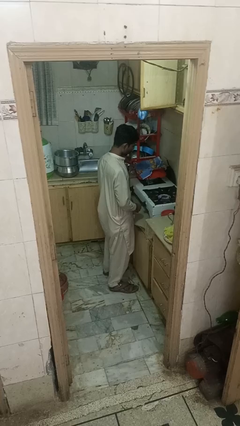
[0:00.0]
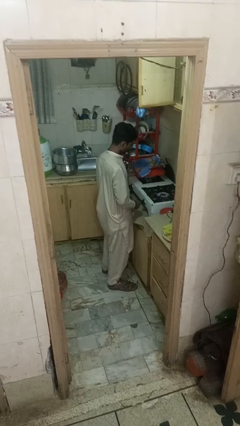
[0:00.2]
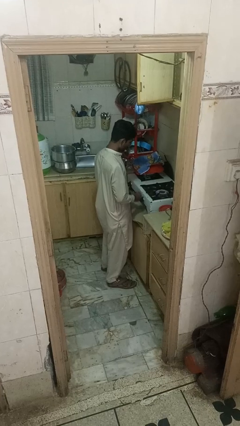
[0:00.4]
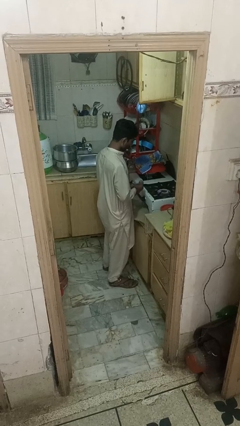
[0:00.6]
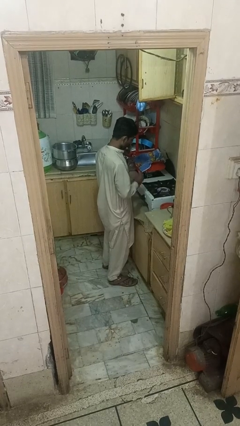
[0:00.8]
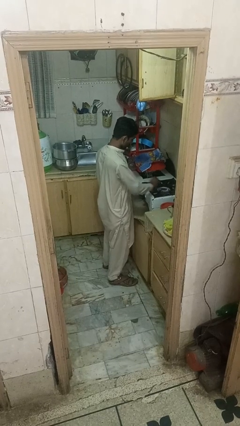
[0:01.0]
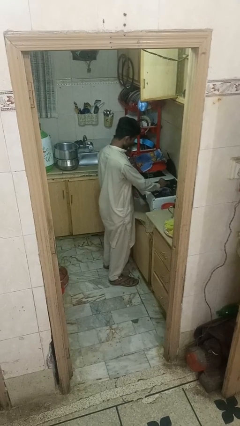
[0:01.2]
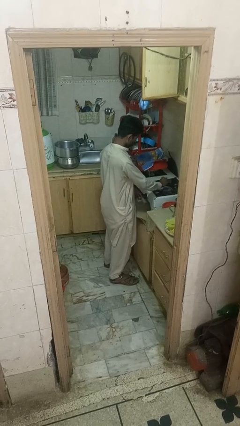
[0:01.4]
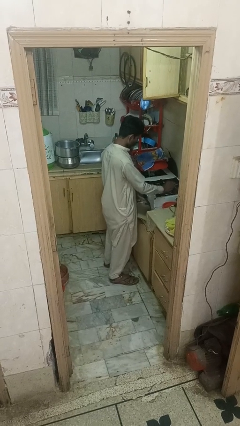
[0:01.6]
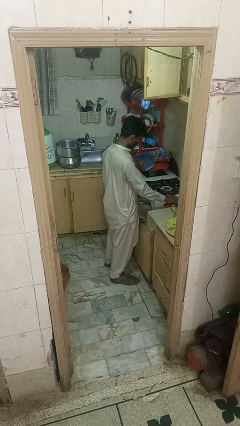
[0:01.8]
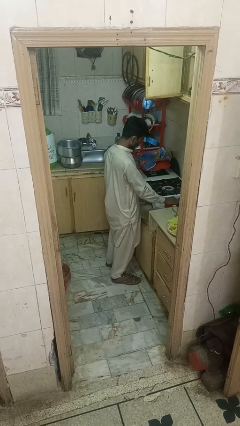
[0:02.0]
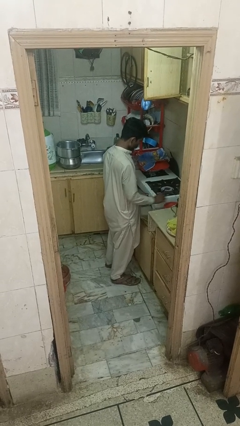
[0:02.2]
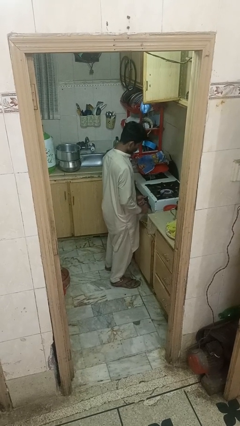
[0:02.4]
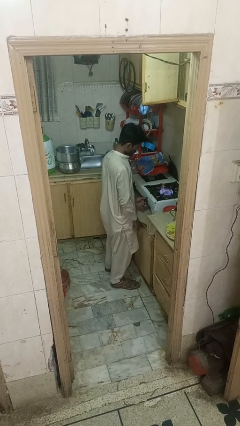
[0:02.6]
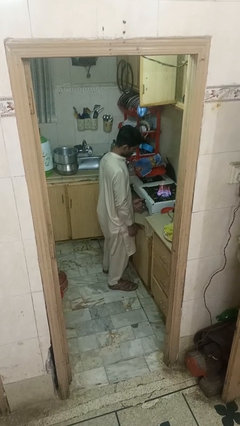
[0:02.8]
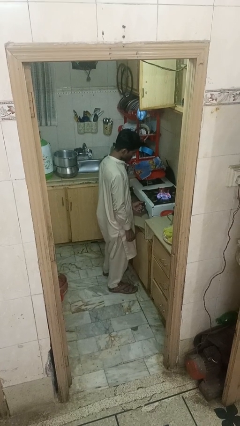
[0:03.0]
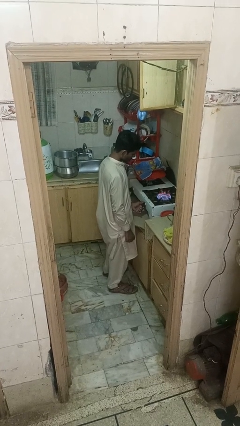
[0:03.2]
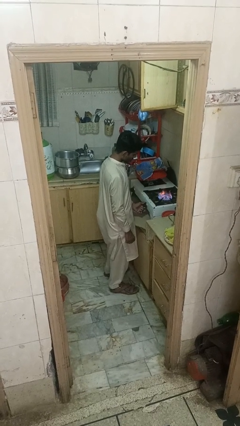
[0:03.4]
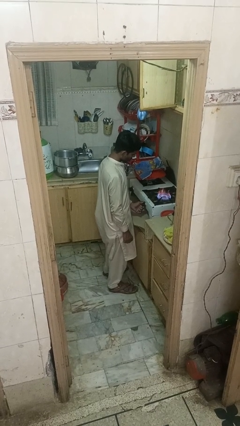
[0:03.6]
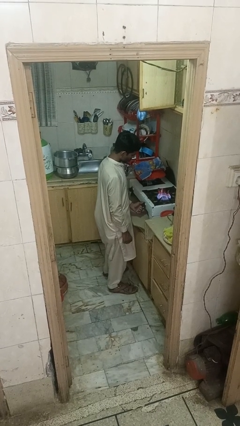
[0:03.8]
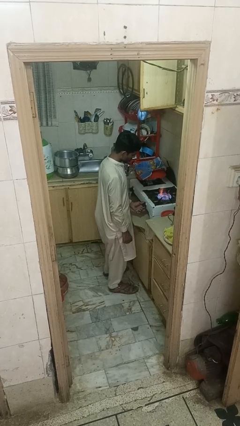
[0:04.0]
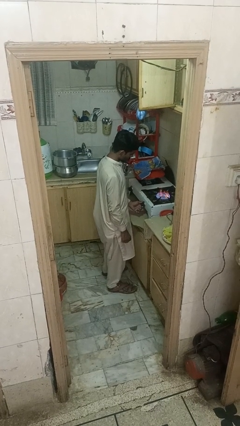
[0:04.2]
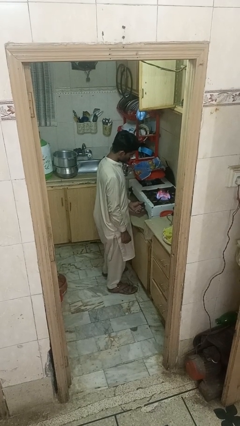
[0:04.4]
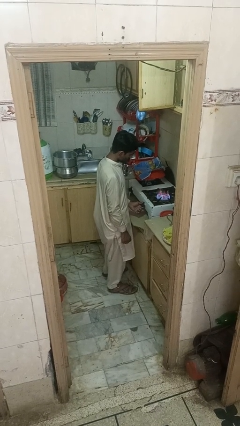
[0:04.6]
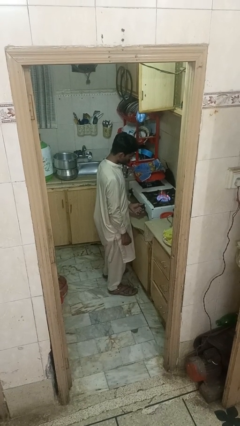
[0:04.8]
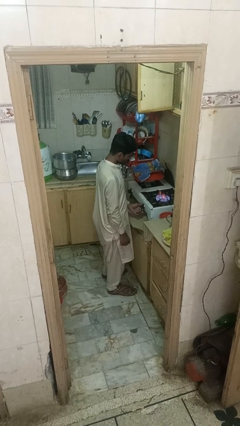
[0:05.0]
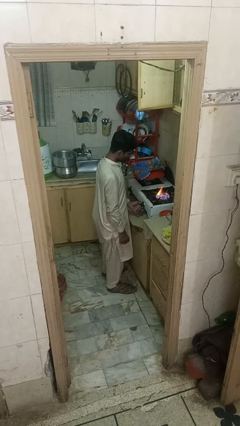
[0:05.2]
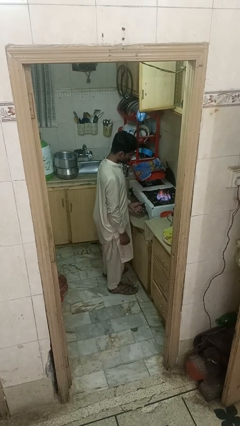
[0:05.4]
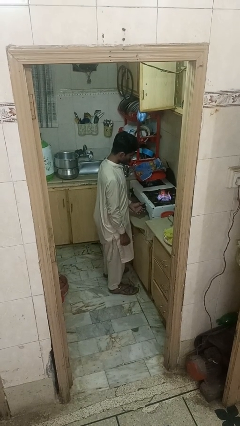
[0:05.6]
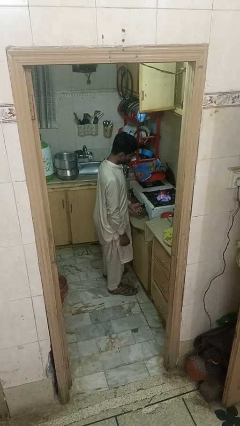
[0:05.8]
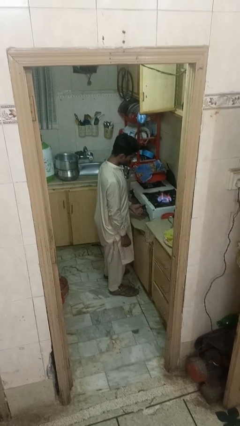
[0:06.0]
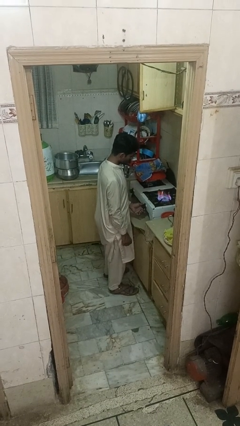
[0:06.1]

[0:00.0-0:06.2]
person turns on stovetop

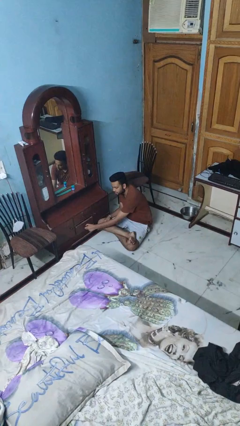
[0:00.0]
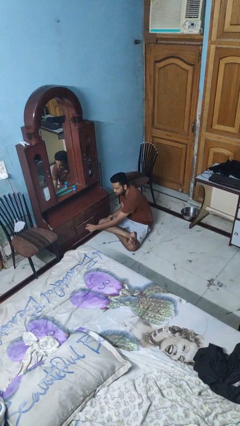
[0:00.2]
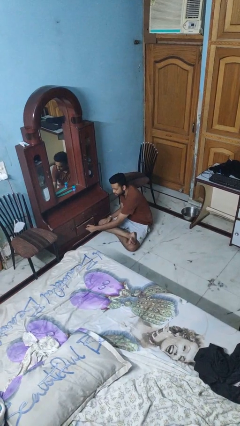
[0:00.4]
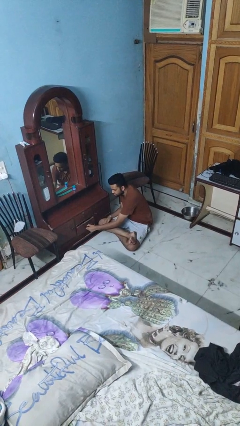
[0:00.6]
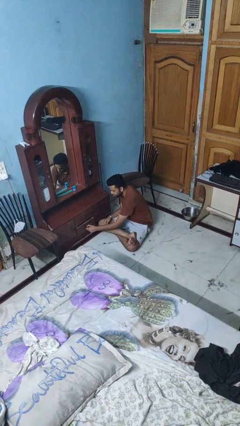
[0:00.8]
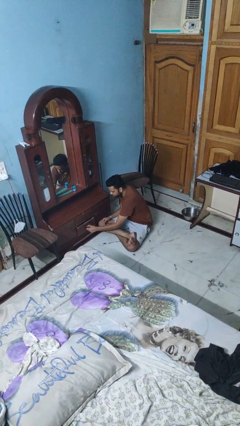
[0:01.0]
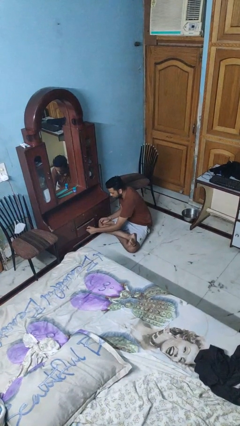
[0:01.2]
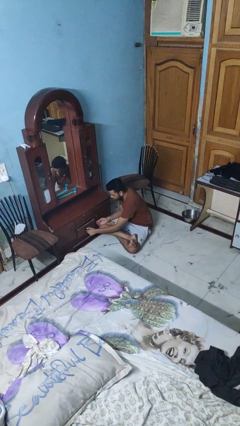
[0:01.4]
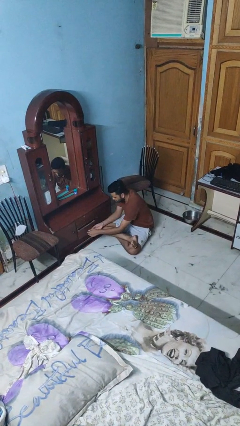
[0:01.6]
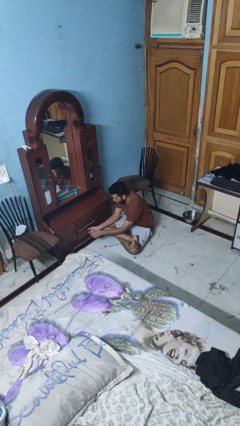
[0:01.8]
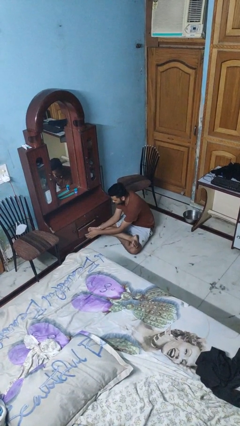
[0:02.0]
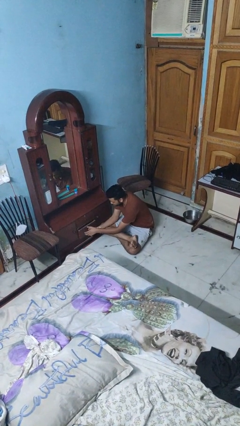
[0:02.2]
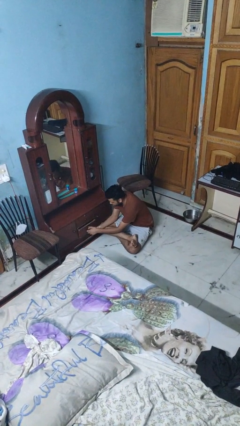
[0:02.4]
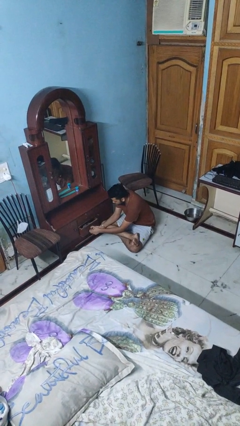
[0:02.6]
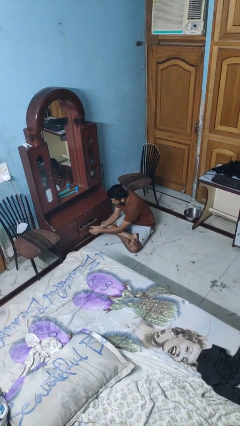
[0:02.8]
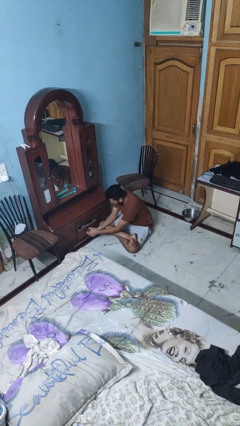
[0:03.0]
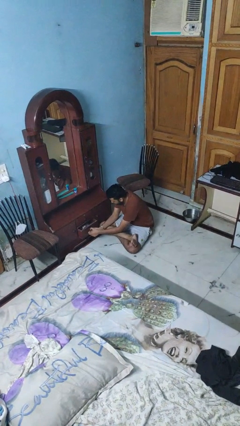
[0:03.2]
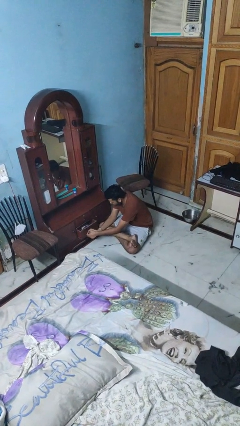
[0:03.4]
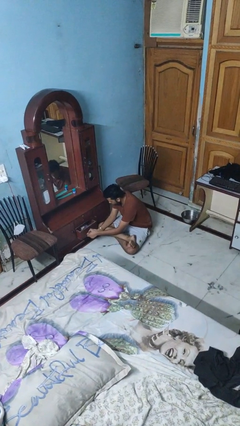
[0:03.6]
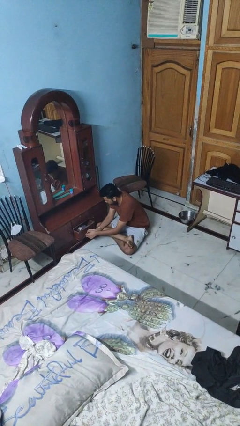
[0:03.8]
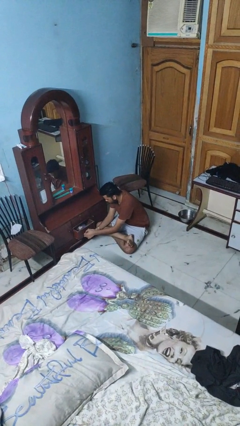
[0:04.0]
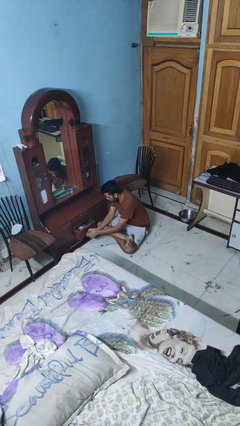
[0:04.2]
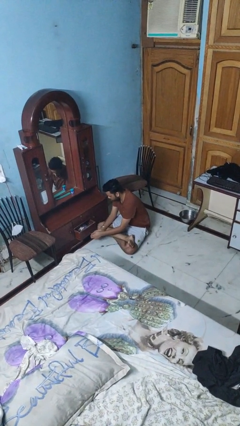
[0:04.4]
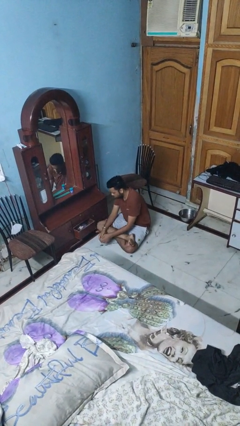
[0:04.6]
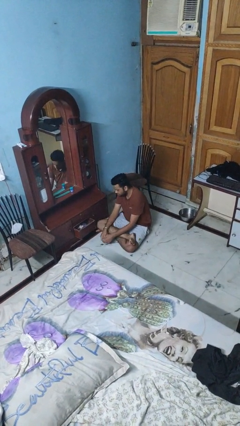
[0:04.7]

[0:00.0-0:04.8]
person opens dresser drawer

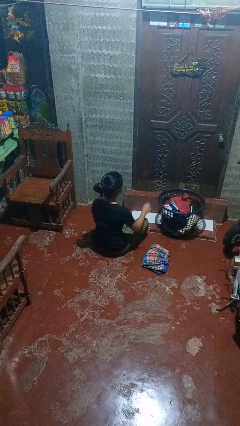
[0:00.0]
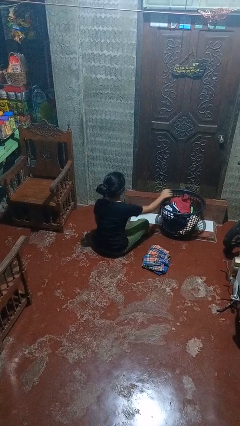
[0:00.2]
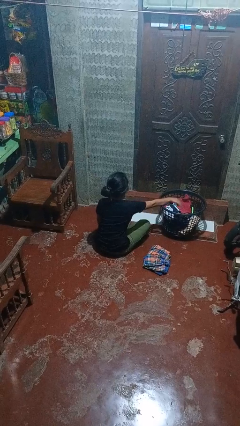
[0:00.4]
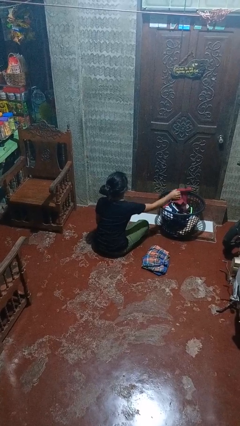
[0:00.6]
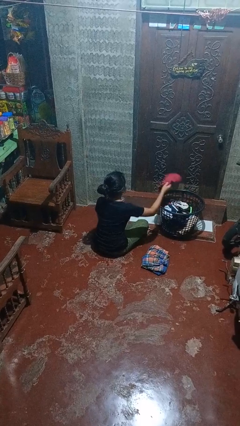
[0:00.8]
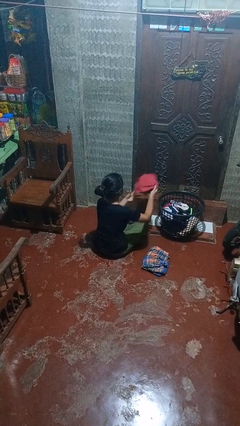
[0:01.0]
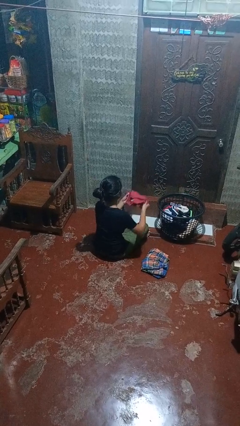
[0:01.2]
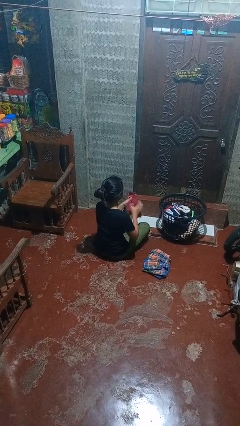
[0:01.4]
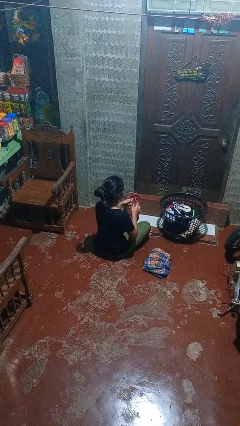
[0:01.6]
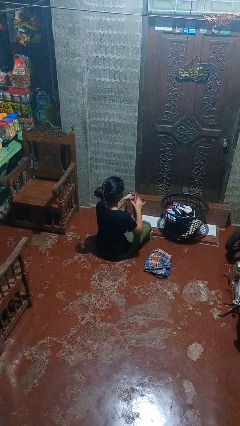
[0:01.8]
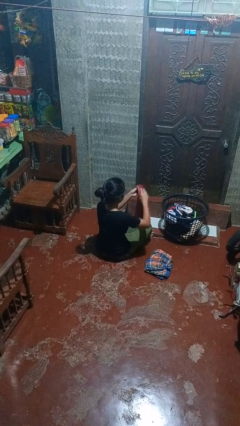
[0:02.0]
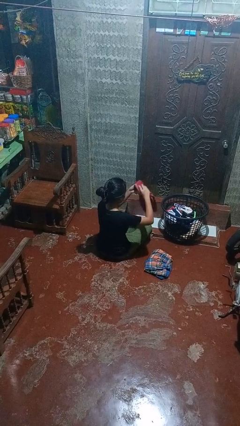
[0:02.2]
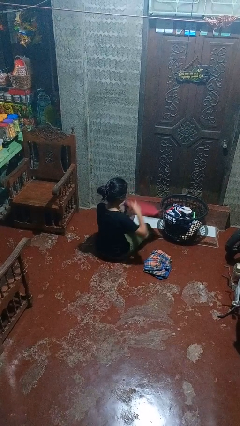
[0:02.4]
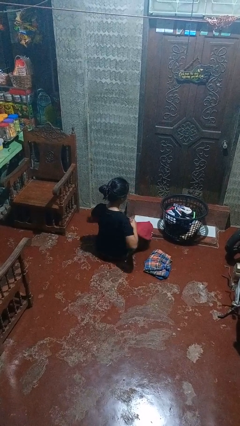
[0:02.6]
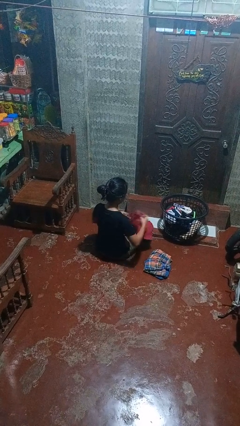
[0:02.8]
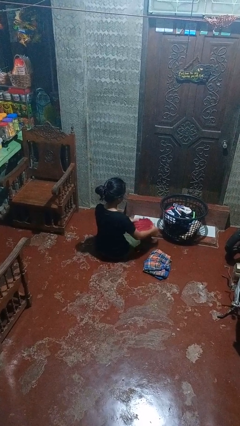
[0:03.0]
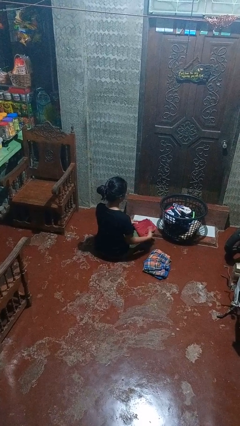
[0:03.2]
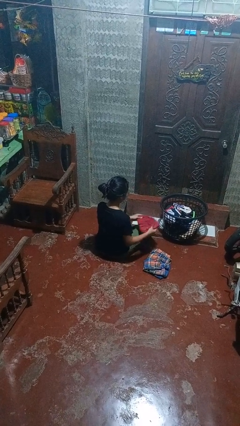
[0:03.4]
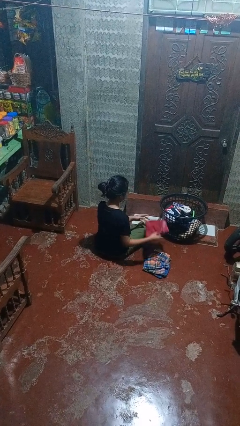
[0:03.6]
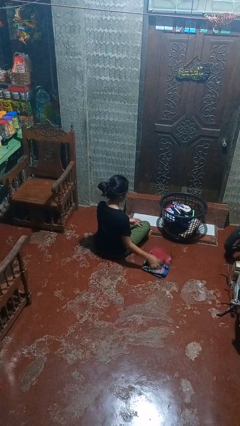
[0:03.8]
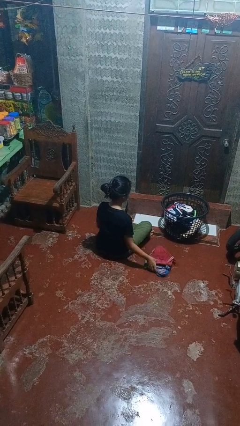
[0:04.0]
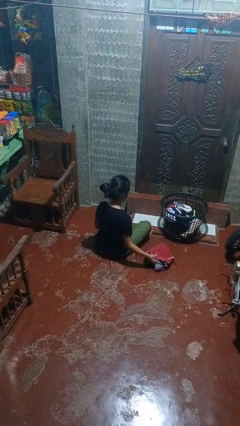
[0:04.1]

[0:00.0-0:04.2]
person folds pants

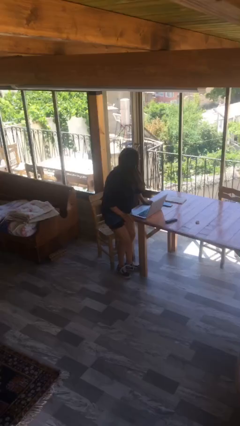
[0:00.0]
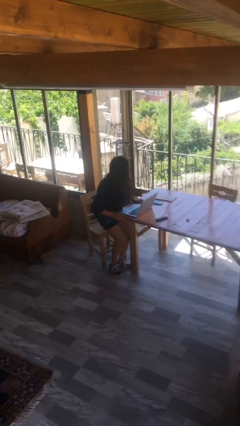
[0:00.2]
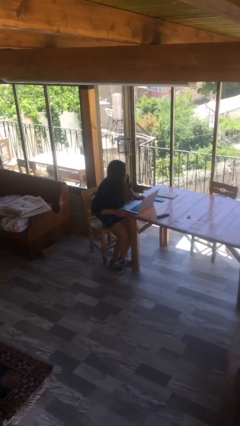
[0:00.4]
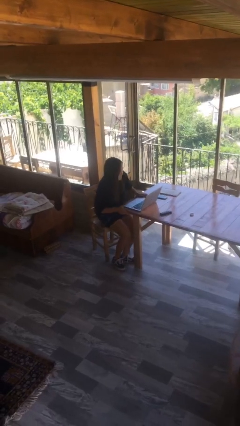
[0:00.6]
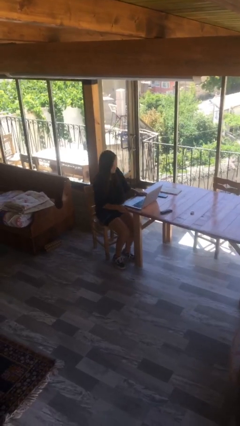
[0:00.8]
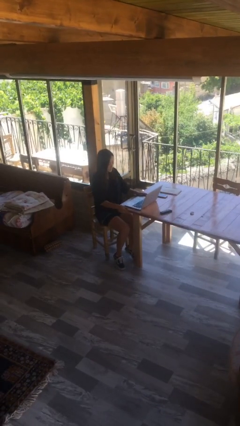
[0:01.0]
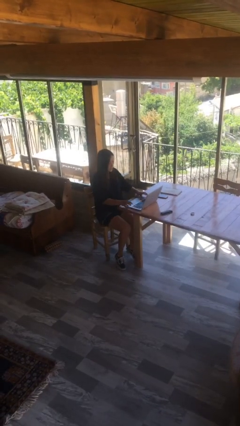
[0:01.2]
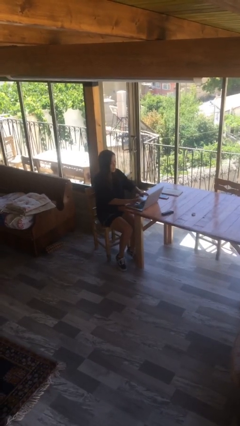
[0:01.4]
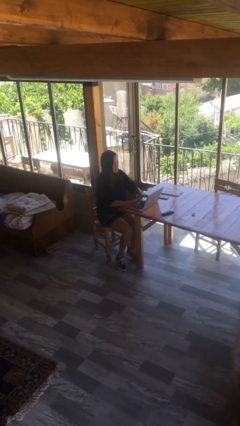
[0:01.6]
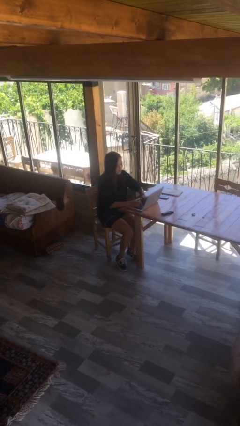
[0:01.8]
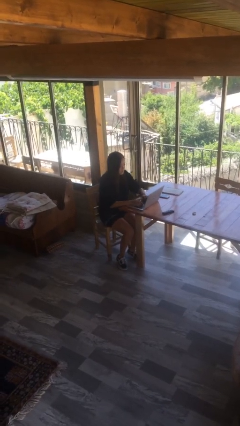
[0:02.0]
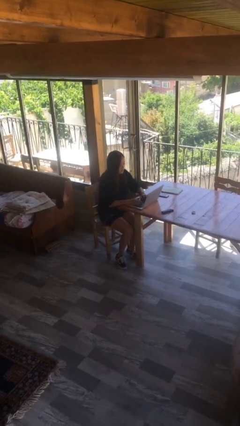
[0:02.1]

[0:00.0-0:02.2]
person sits down

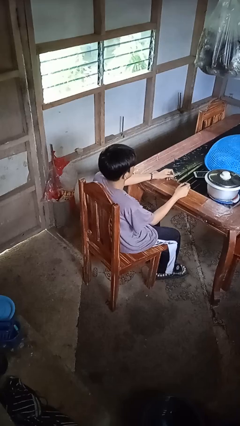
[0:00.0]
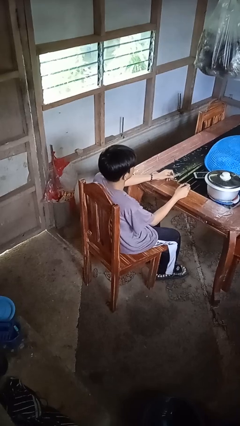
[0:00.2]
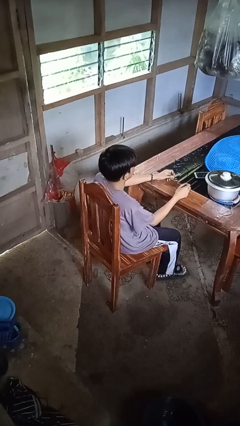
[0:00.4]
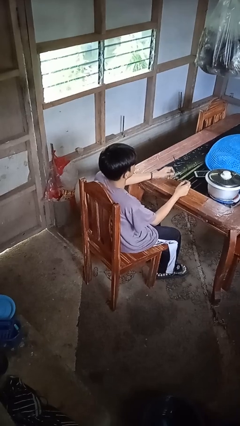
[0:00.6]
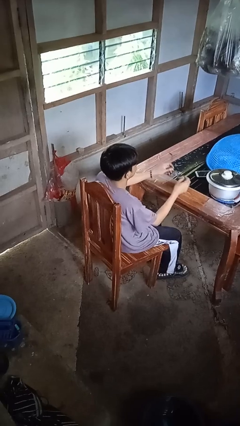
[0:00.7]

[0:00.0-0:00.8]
person puts on glasses
